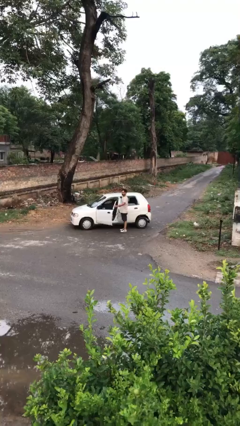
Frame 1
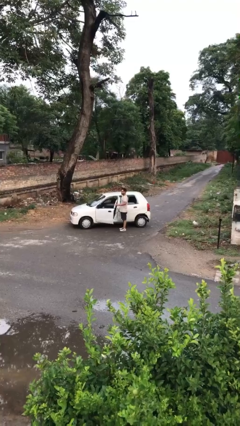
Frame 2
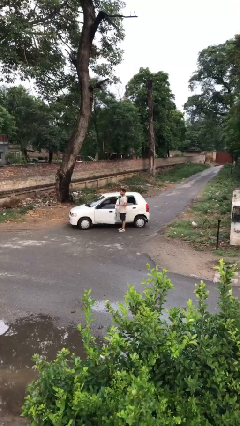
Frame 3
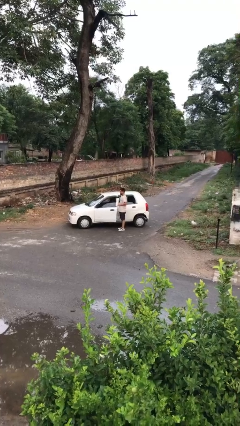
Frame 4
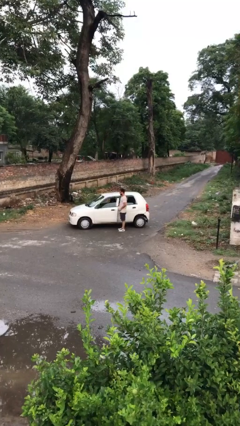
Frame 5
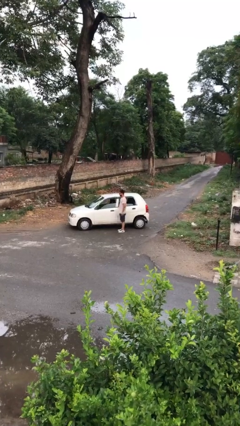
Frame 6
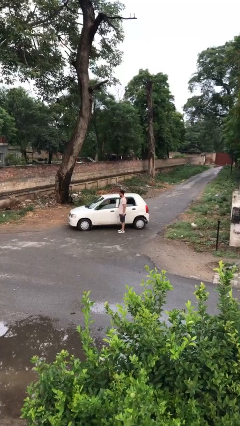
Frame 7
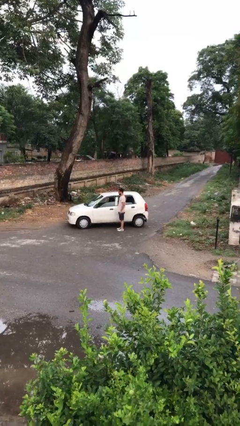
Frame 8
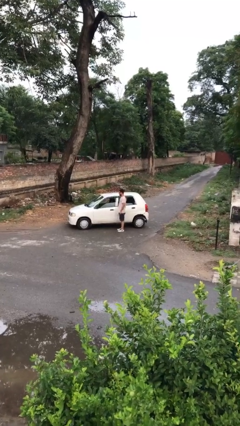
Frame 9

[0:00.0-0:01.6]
person closes car door

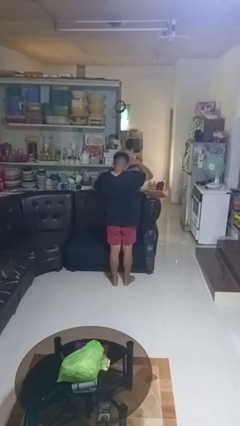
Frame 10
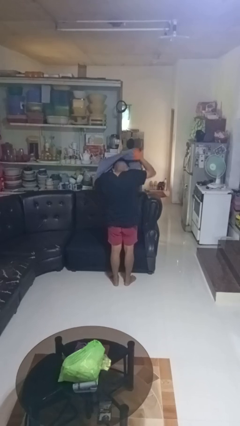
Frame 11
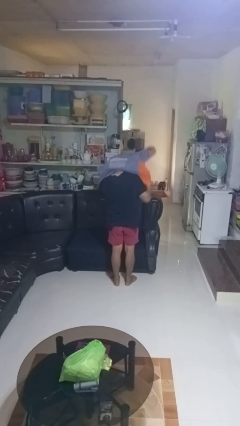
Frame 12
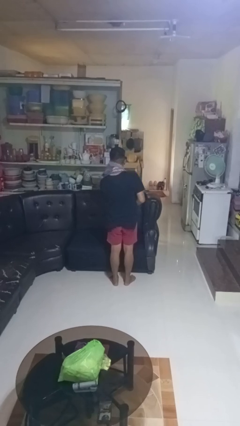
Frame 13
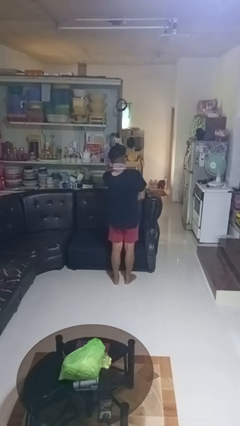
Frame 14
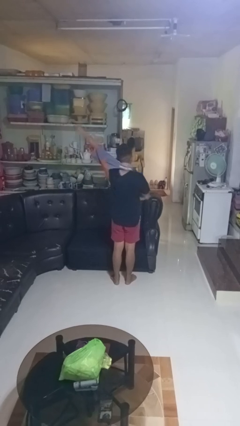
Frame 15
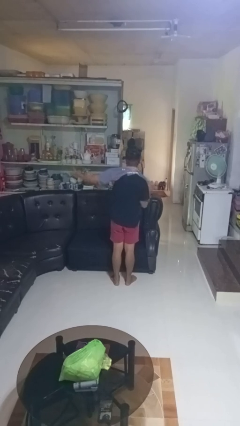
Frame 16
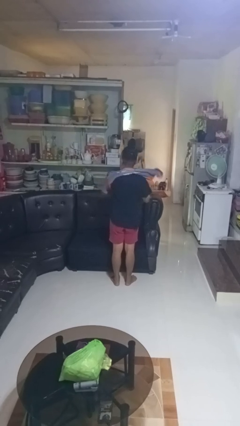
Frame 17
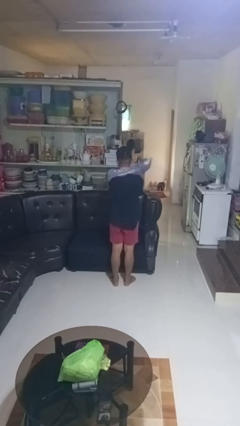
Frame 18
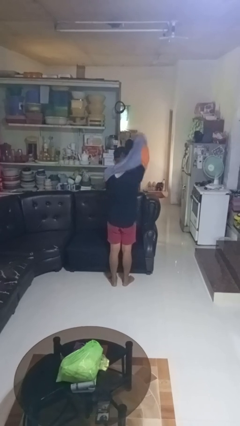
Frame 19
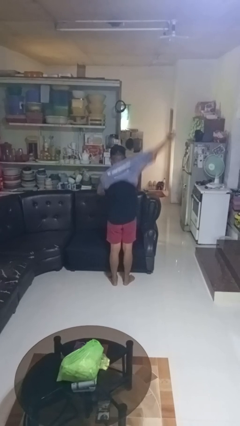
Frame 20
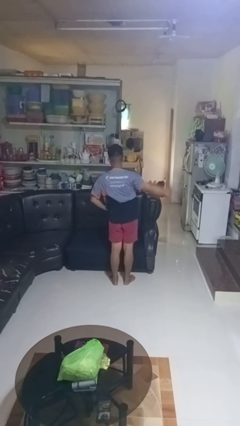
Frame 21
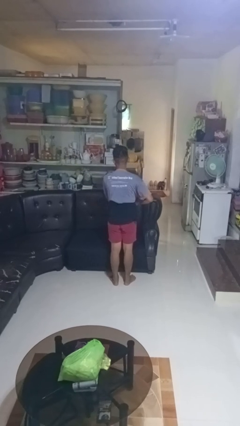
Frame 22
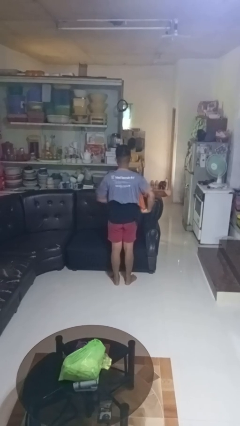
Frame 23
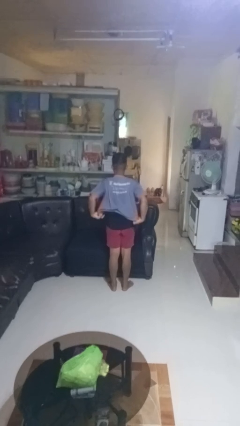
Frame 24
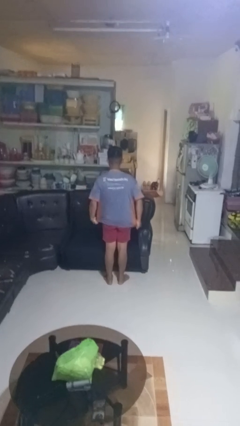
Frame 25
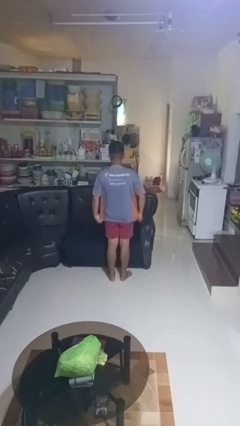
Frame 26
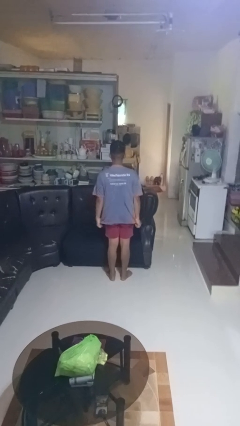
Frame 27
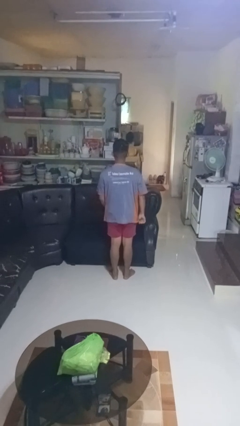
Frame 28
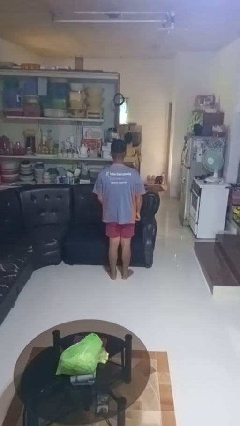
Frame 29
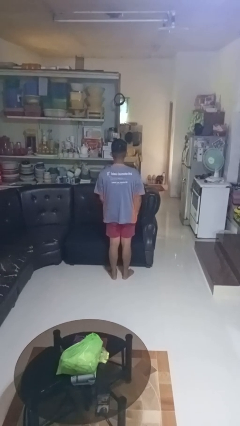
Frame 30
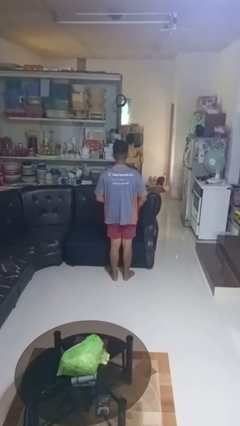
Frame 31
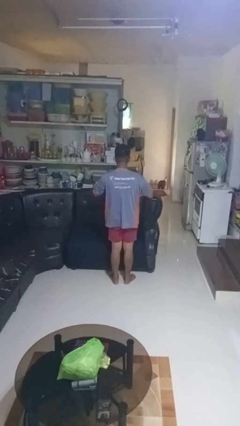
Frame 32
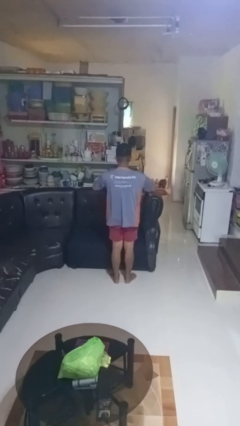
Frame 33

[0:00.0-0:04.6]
person puts on shirt

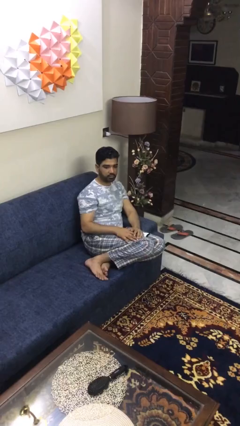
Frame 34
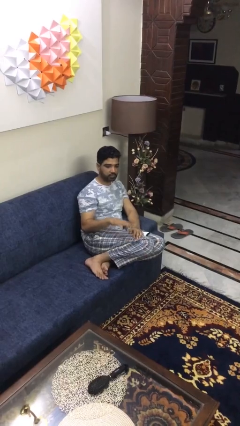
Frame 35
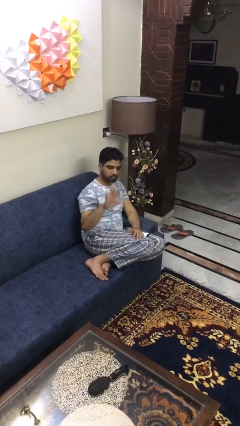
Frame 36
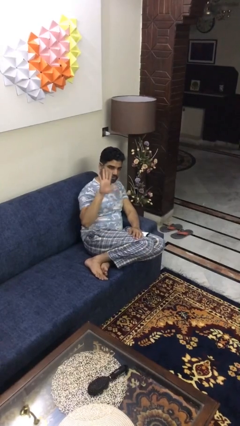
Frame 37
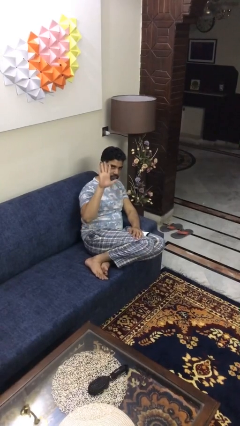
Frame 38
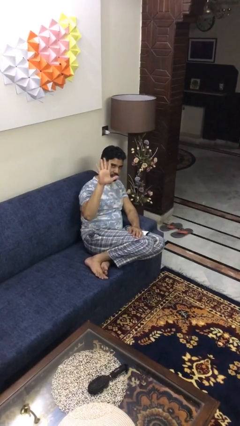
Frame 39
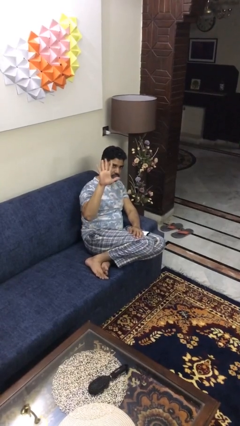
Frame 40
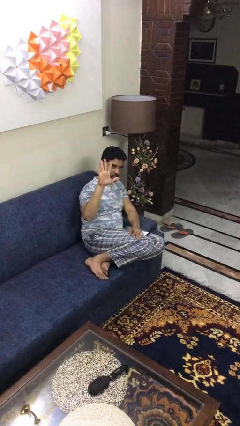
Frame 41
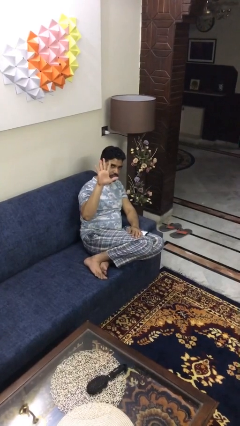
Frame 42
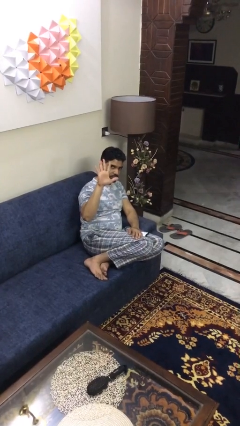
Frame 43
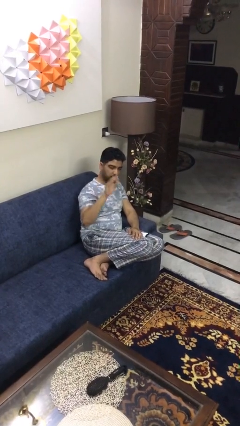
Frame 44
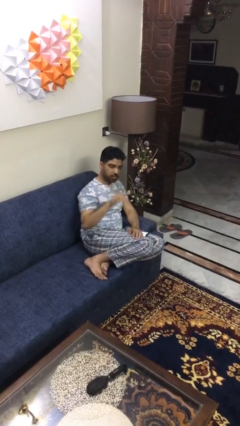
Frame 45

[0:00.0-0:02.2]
person gestures number five

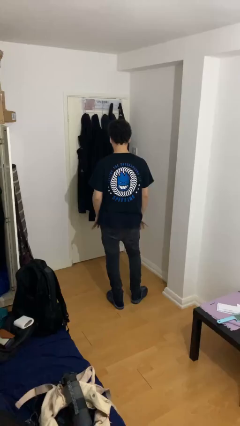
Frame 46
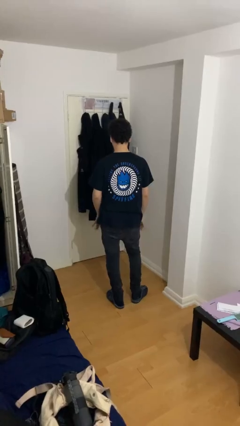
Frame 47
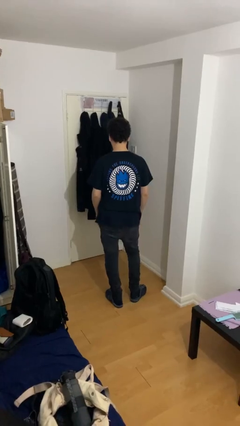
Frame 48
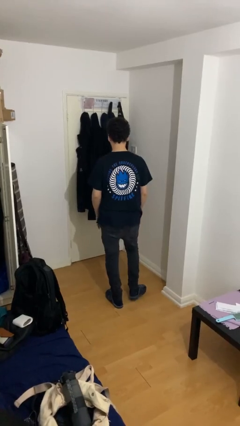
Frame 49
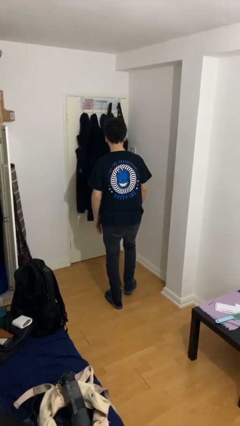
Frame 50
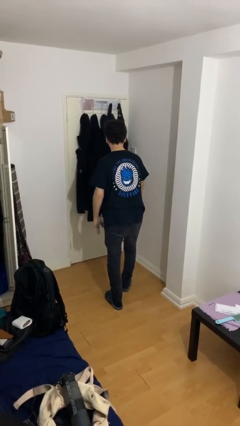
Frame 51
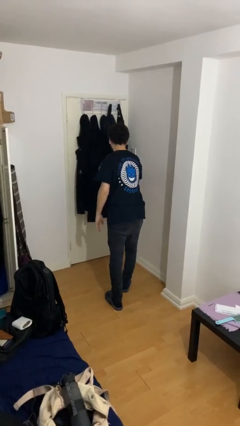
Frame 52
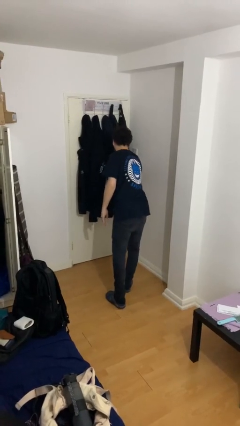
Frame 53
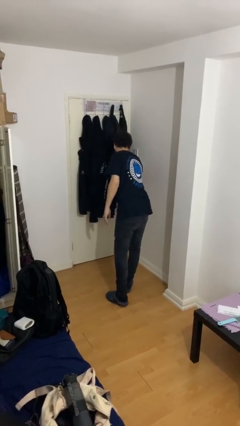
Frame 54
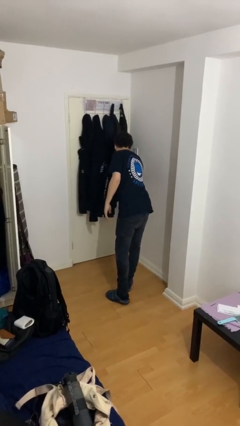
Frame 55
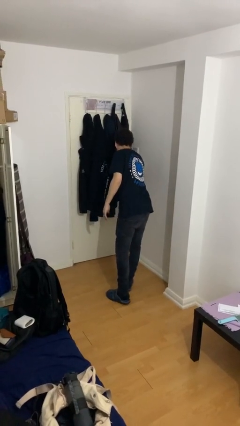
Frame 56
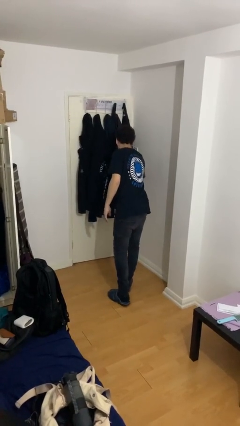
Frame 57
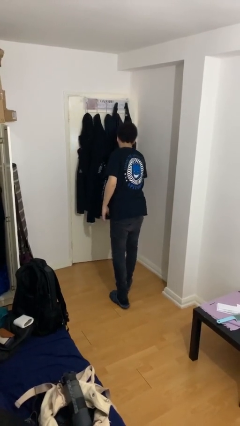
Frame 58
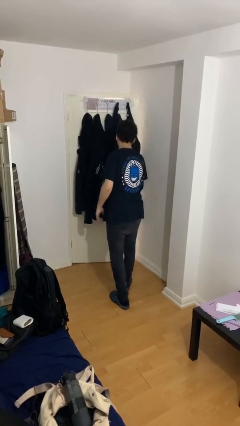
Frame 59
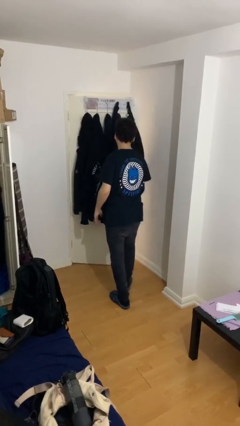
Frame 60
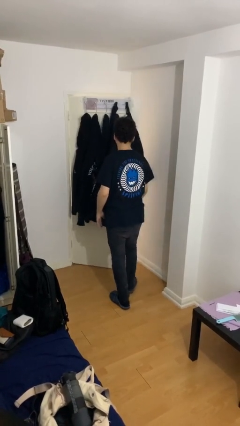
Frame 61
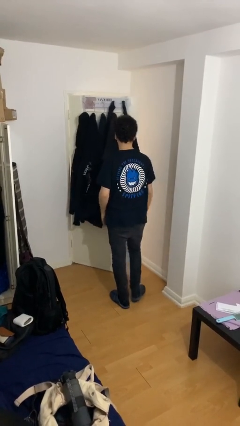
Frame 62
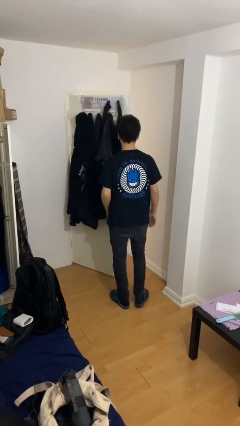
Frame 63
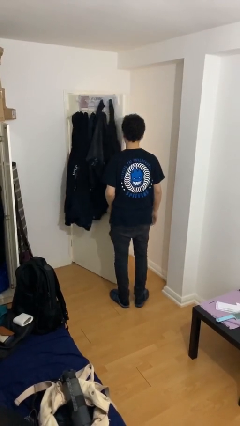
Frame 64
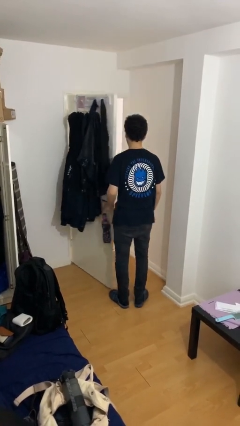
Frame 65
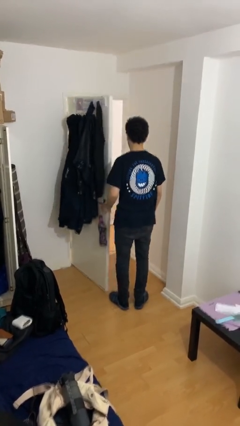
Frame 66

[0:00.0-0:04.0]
person opens facility door

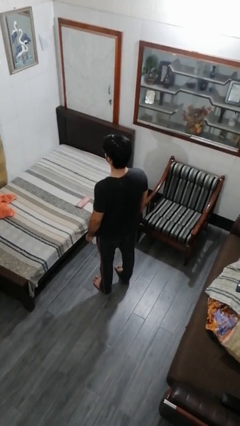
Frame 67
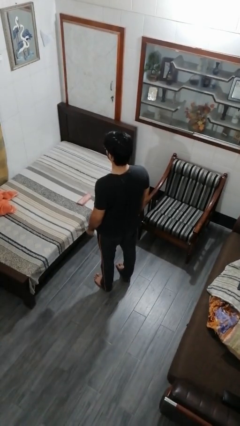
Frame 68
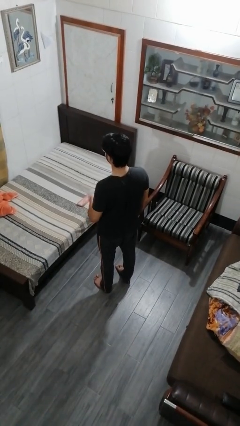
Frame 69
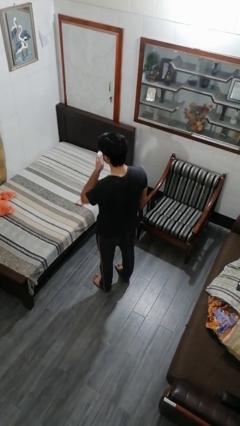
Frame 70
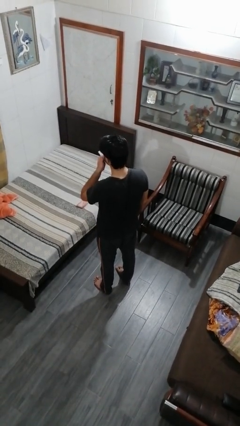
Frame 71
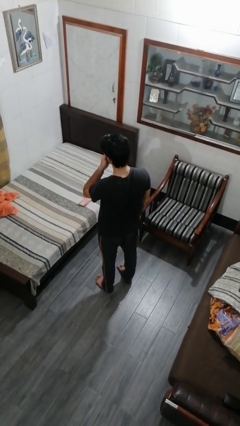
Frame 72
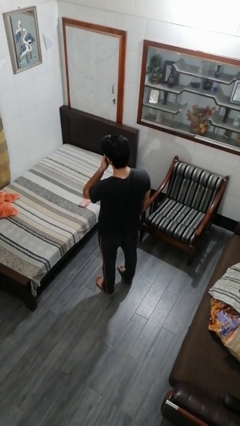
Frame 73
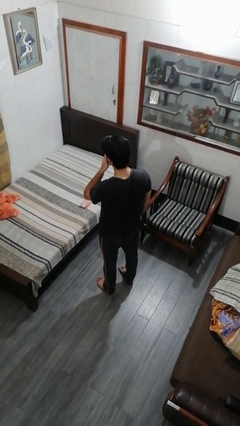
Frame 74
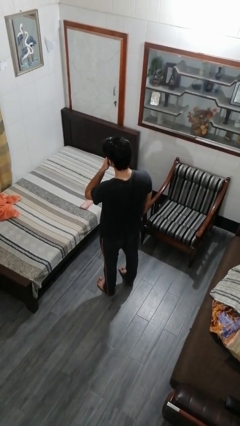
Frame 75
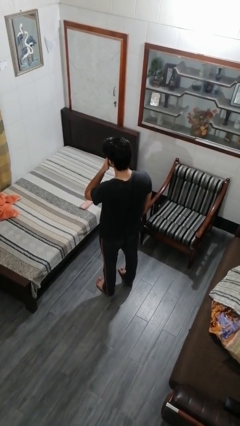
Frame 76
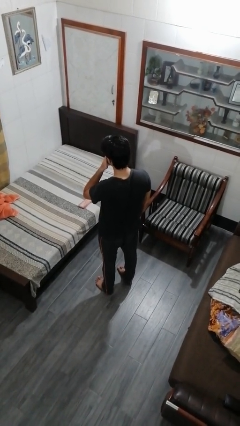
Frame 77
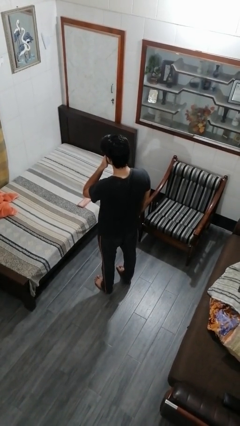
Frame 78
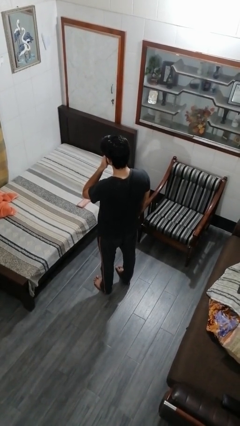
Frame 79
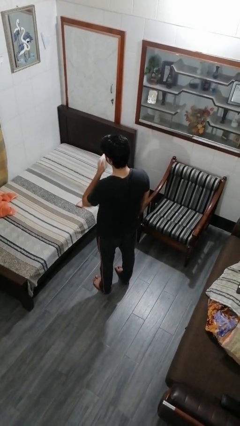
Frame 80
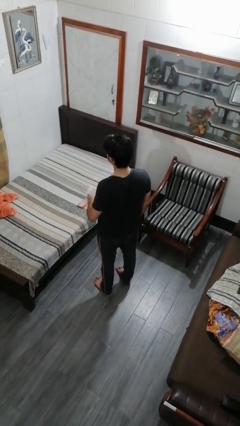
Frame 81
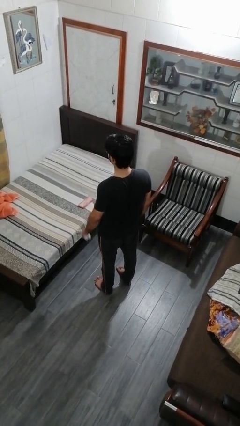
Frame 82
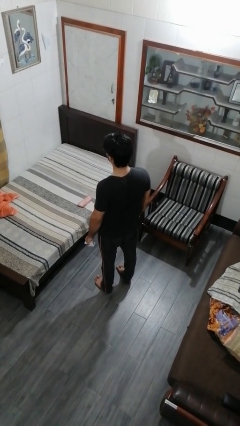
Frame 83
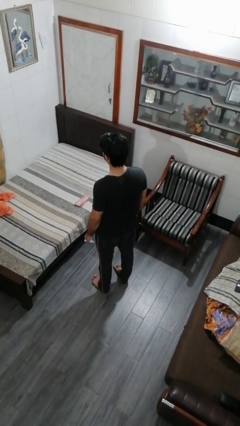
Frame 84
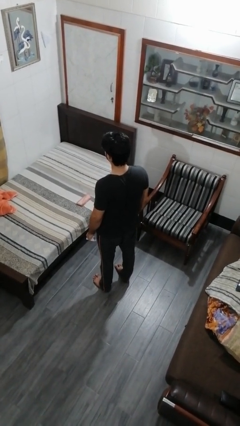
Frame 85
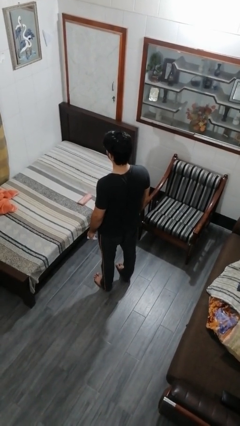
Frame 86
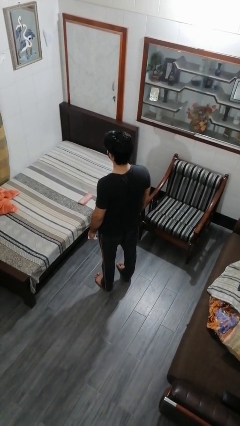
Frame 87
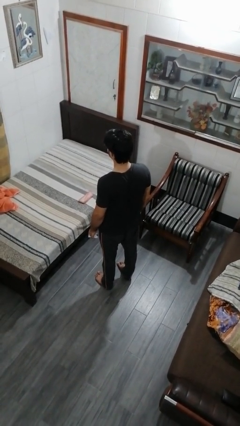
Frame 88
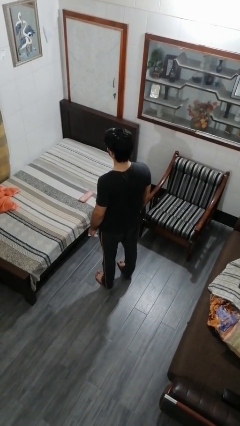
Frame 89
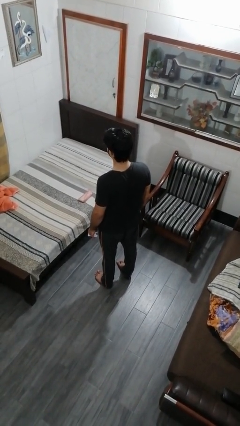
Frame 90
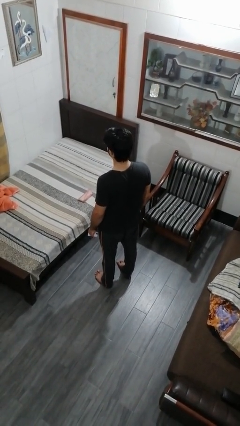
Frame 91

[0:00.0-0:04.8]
person blows nose

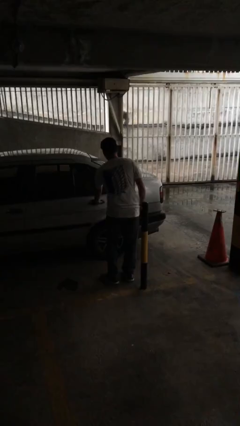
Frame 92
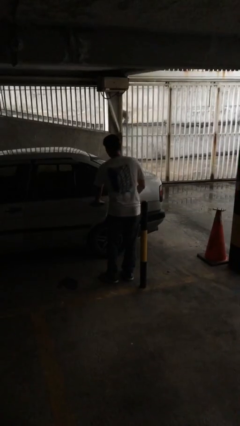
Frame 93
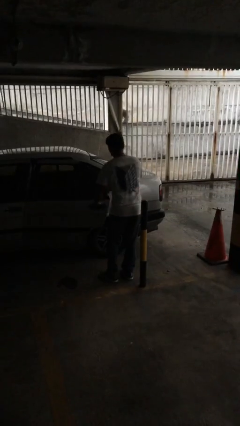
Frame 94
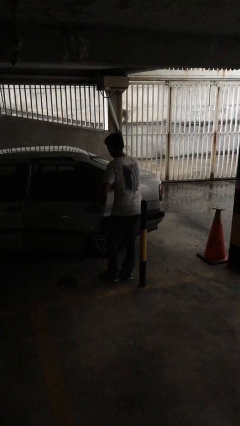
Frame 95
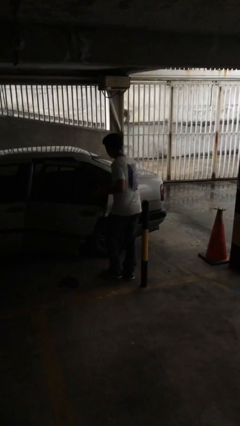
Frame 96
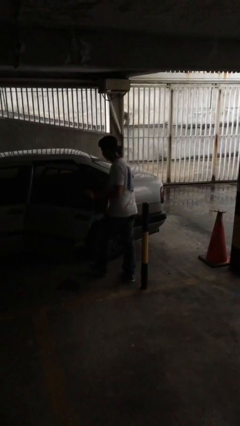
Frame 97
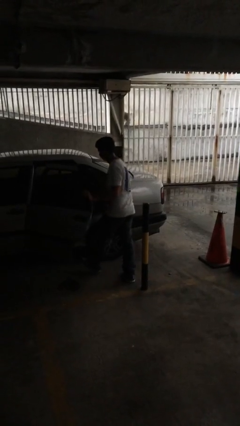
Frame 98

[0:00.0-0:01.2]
person opens car door
